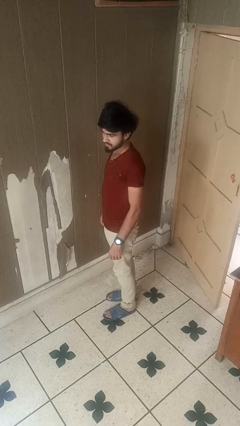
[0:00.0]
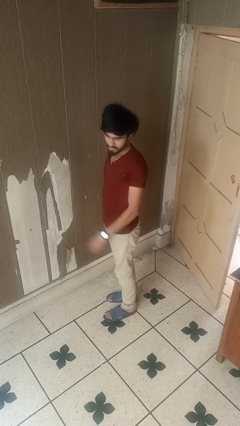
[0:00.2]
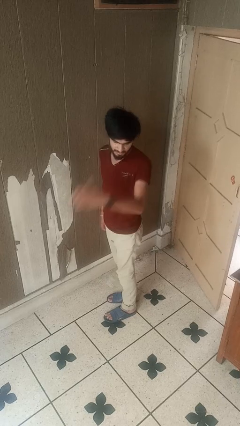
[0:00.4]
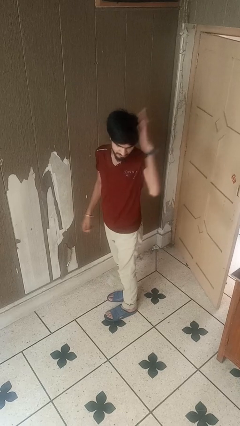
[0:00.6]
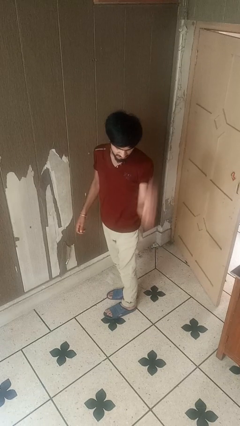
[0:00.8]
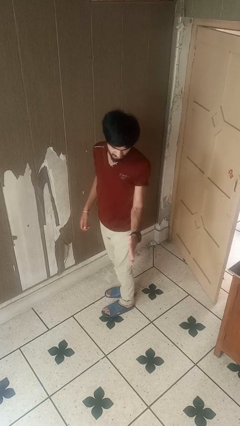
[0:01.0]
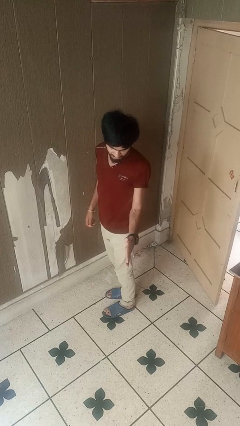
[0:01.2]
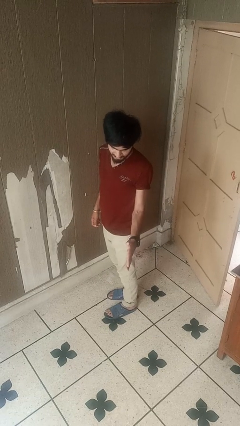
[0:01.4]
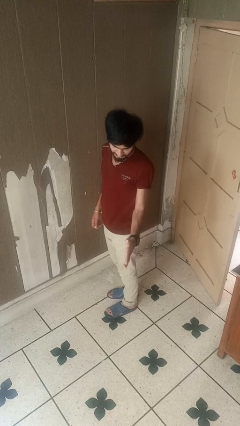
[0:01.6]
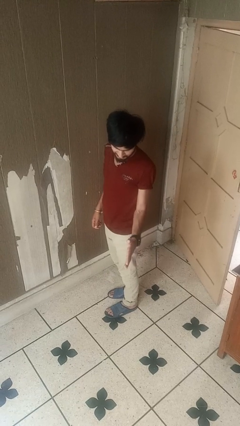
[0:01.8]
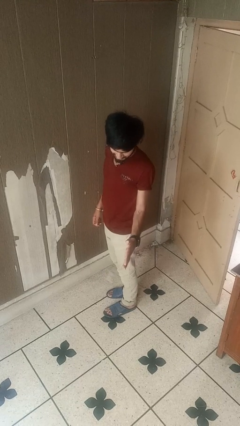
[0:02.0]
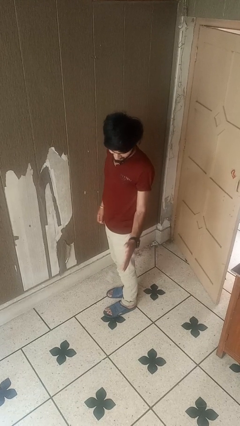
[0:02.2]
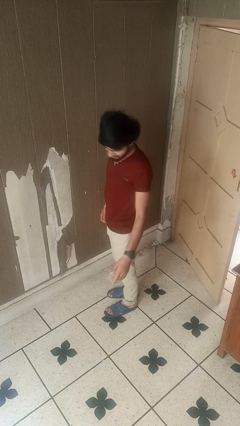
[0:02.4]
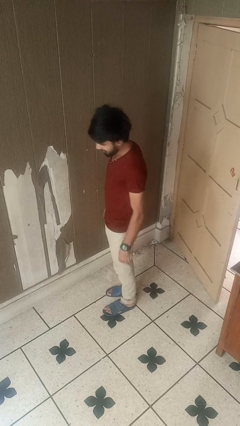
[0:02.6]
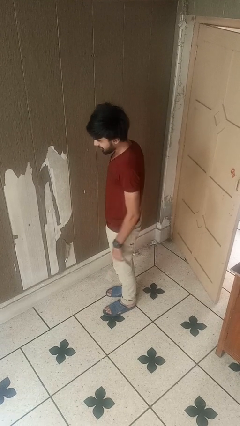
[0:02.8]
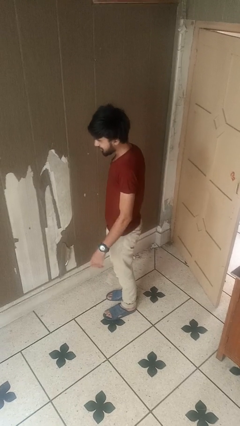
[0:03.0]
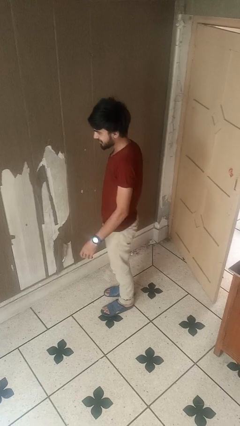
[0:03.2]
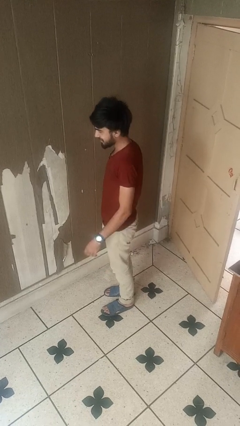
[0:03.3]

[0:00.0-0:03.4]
person karate chop

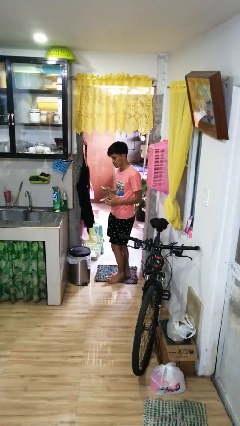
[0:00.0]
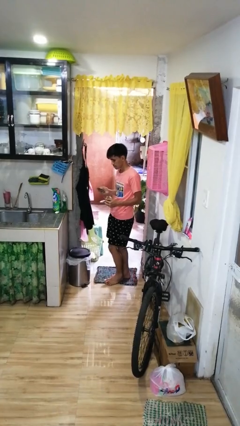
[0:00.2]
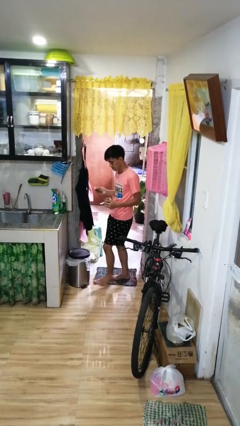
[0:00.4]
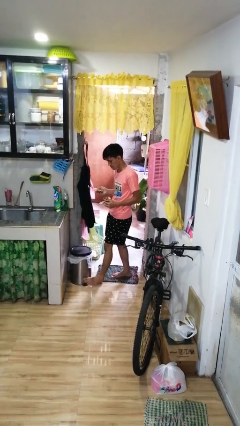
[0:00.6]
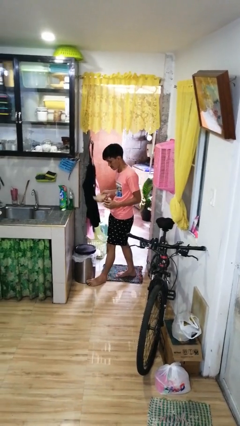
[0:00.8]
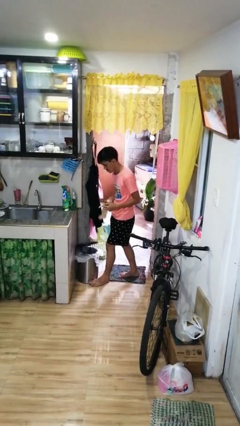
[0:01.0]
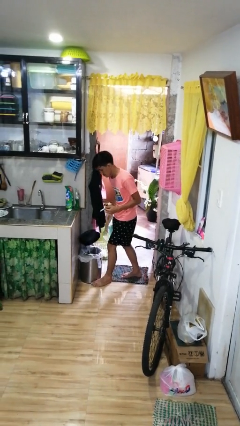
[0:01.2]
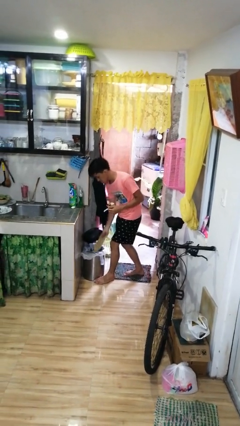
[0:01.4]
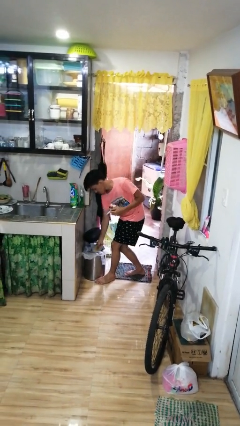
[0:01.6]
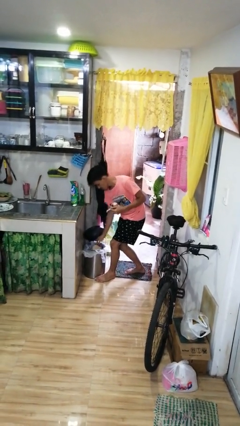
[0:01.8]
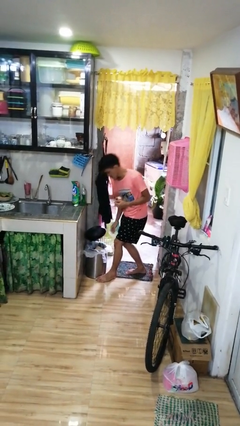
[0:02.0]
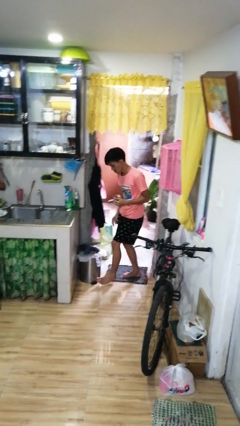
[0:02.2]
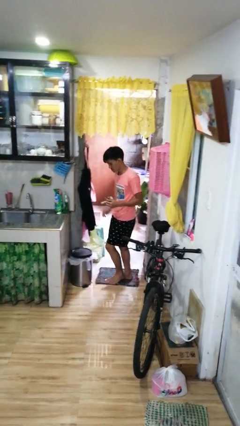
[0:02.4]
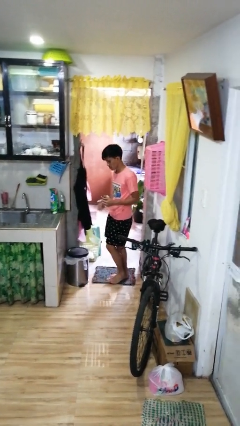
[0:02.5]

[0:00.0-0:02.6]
person discards trash

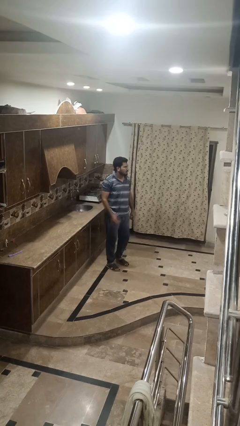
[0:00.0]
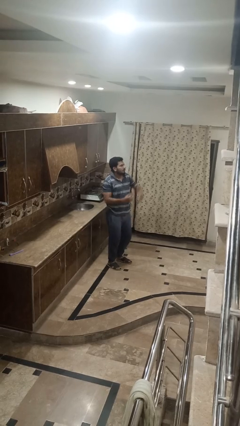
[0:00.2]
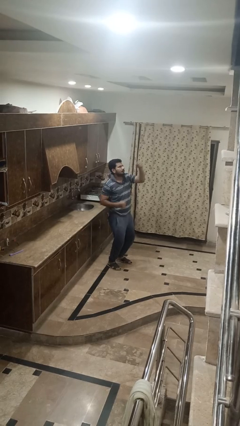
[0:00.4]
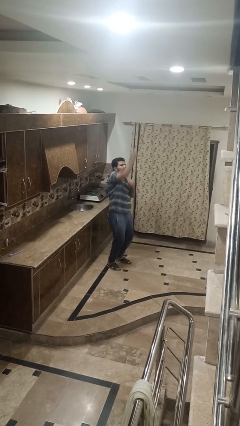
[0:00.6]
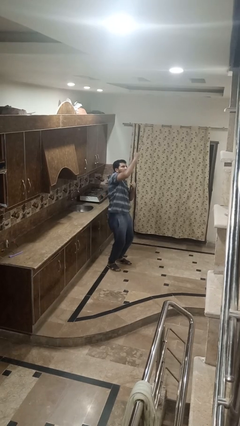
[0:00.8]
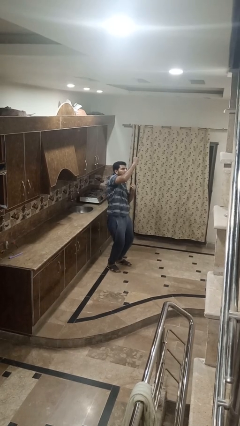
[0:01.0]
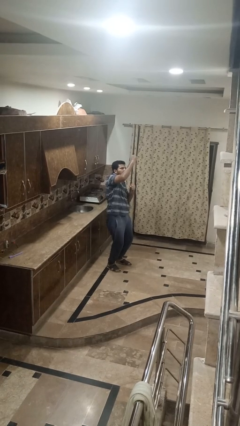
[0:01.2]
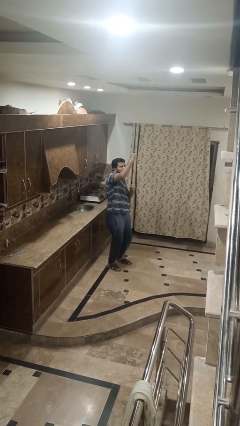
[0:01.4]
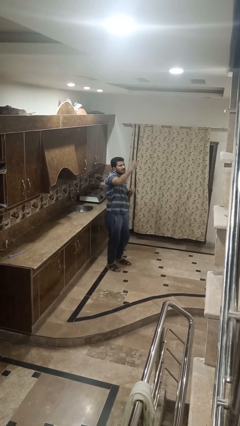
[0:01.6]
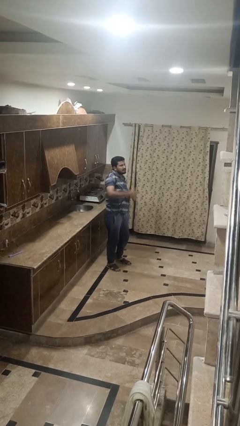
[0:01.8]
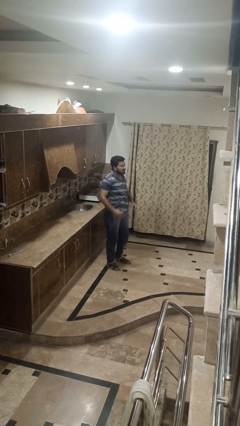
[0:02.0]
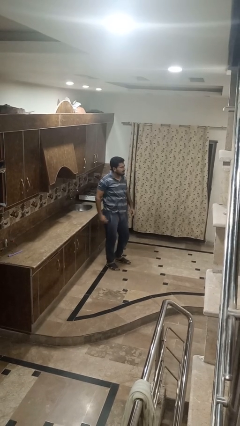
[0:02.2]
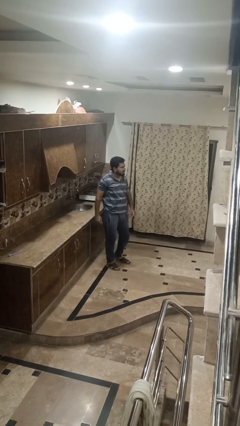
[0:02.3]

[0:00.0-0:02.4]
person punches

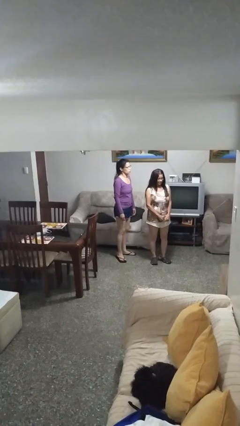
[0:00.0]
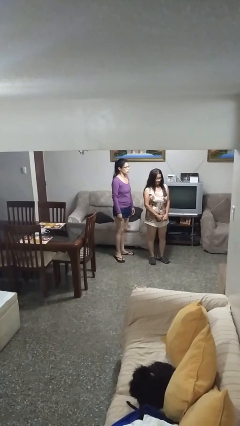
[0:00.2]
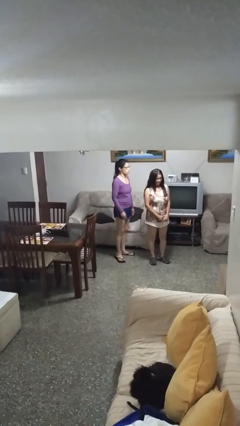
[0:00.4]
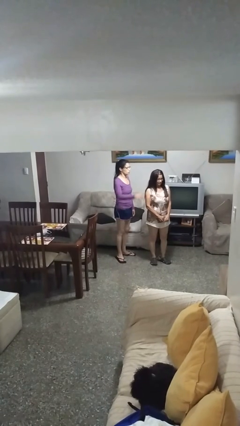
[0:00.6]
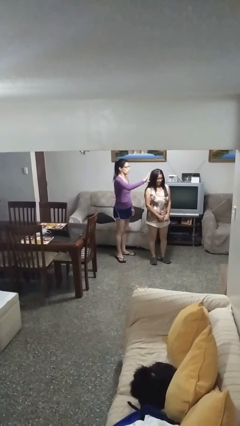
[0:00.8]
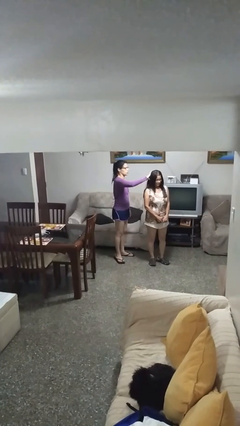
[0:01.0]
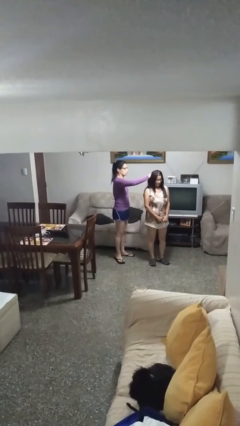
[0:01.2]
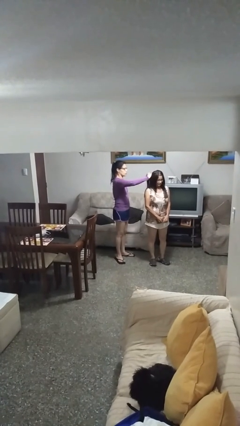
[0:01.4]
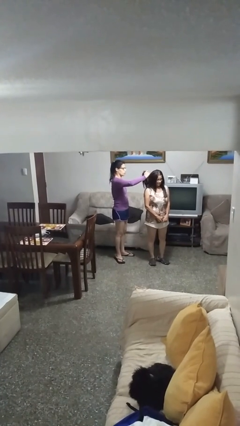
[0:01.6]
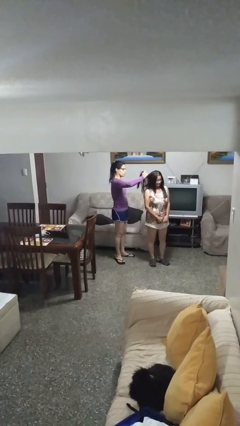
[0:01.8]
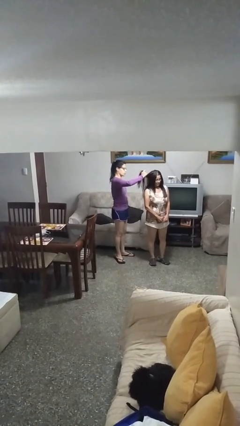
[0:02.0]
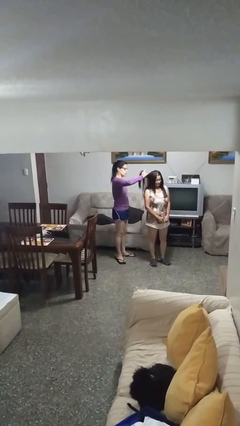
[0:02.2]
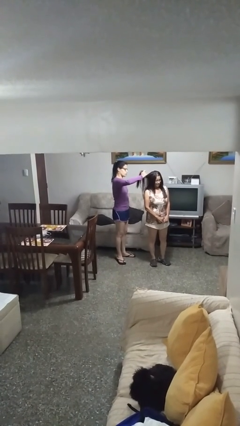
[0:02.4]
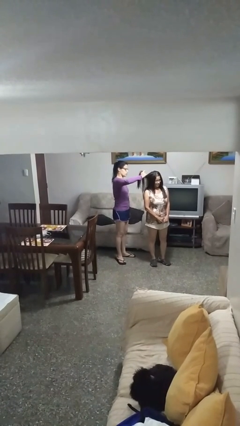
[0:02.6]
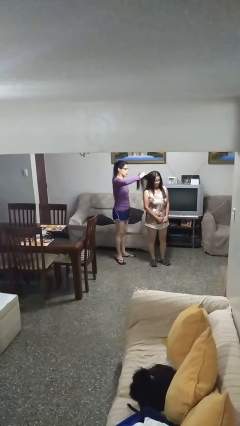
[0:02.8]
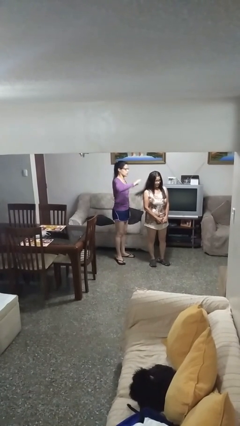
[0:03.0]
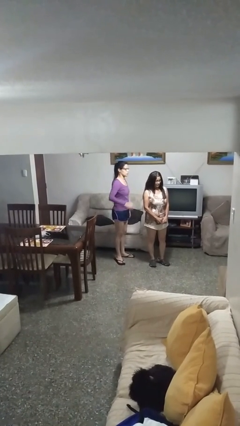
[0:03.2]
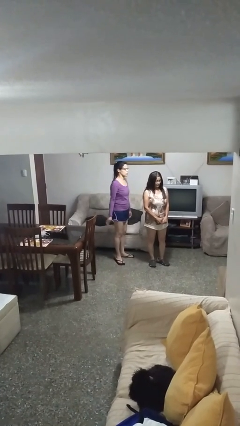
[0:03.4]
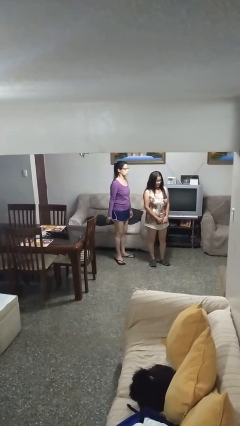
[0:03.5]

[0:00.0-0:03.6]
person grabs person by hair

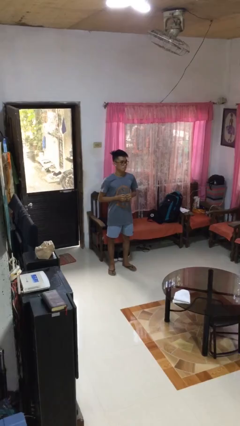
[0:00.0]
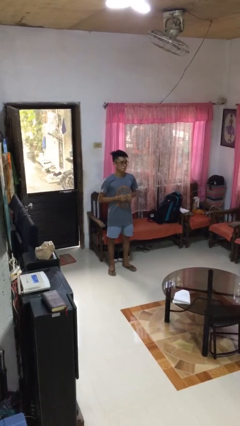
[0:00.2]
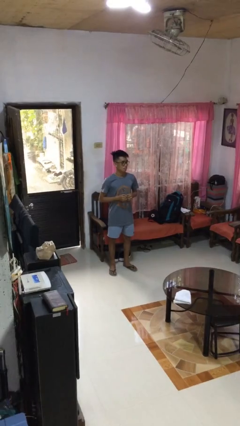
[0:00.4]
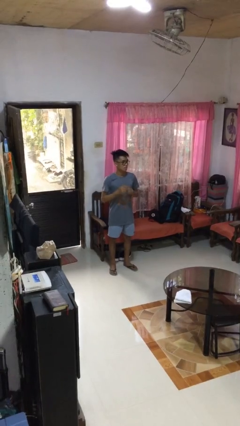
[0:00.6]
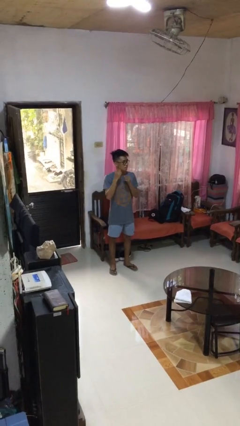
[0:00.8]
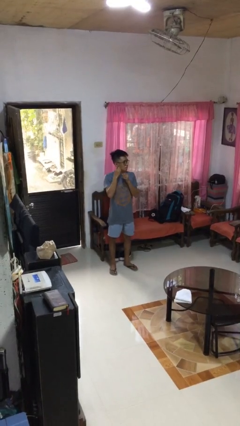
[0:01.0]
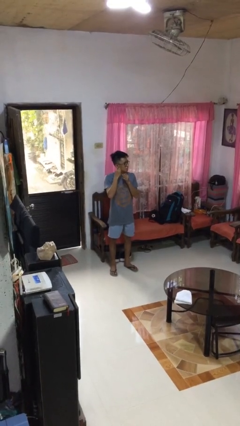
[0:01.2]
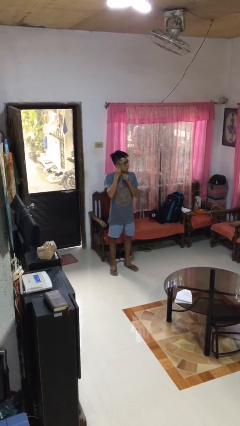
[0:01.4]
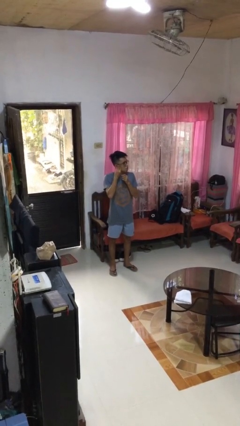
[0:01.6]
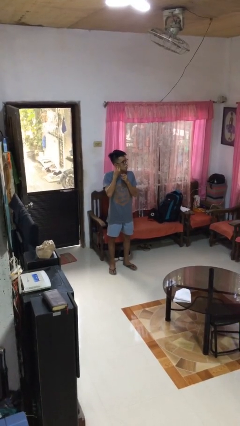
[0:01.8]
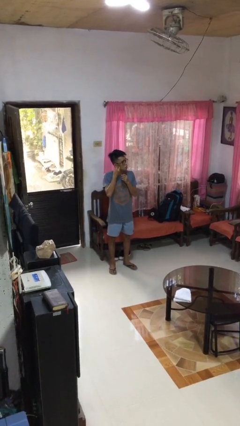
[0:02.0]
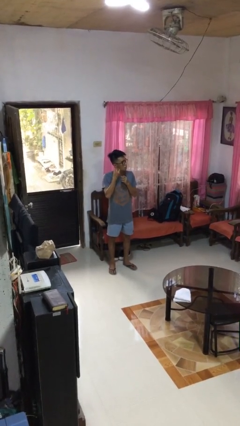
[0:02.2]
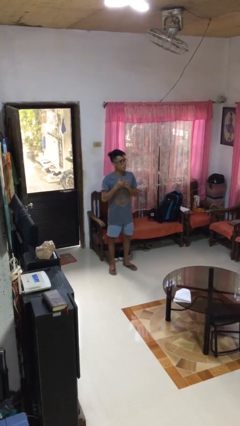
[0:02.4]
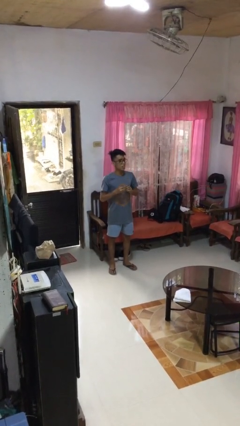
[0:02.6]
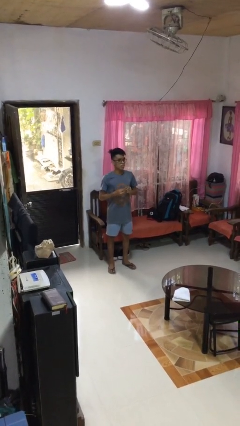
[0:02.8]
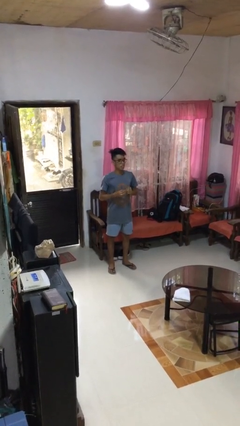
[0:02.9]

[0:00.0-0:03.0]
person takes off earrings

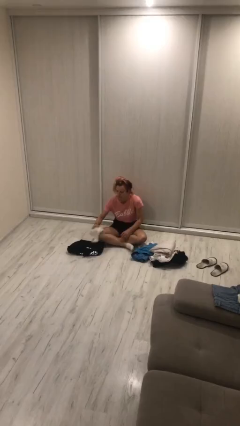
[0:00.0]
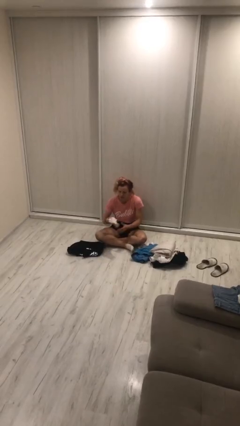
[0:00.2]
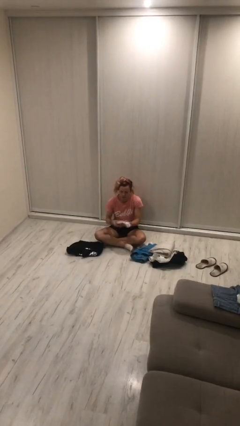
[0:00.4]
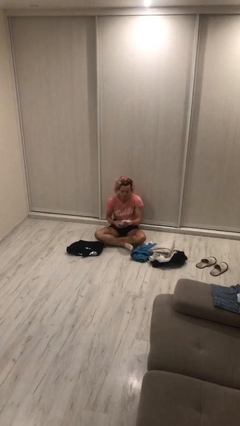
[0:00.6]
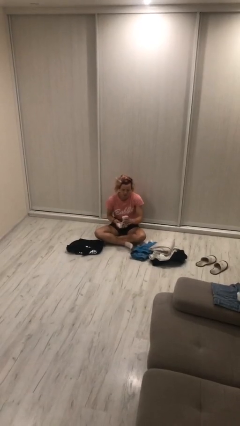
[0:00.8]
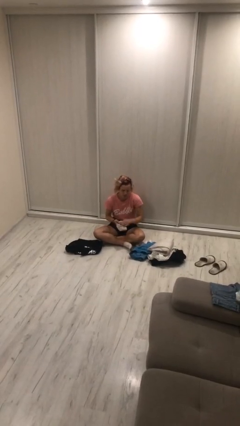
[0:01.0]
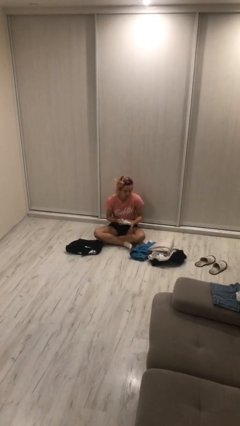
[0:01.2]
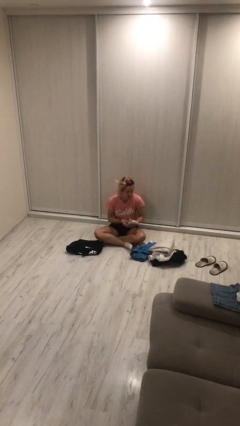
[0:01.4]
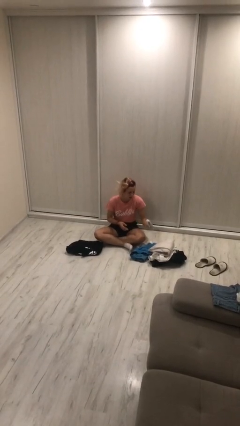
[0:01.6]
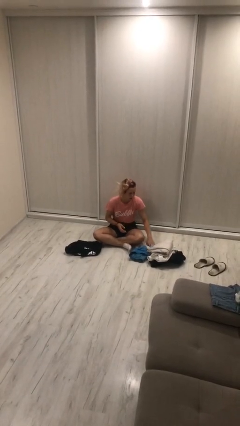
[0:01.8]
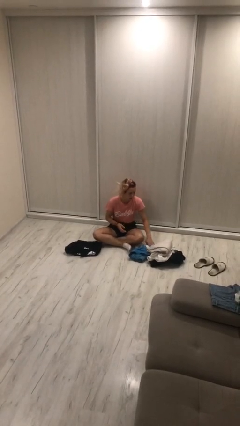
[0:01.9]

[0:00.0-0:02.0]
person folds socks

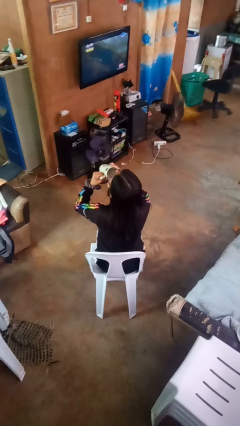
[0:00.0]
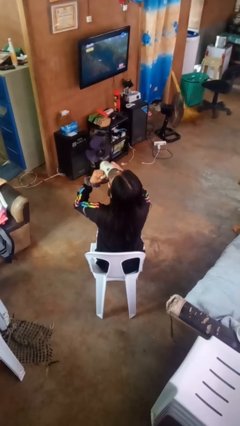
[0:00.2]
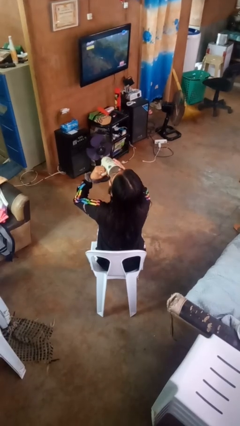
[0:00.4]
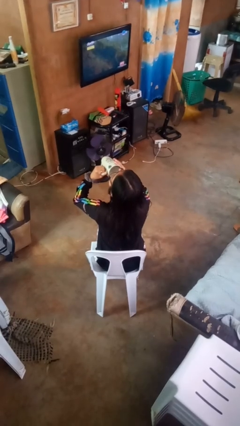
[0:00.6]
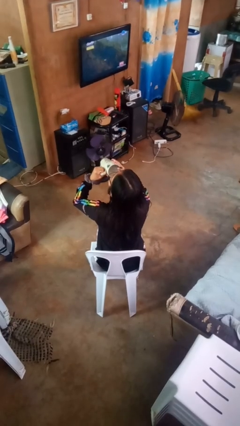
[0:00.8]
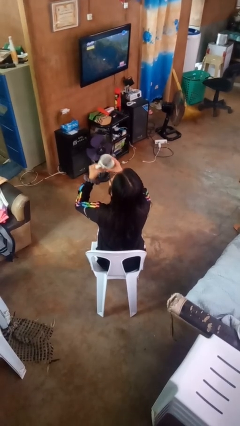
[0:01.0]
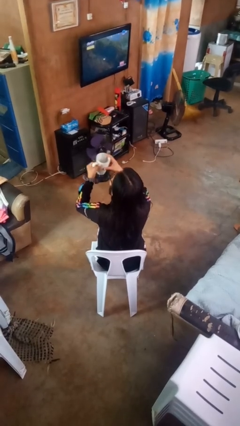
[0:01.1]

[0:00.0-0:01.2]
person drinks from mug
